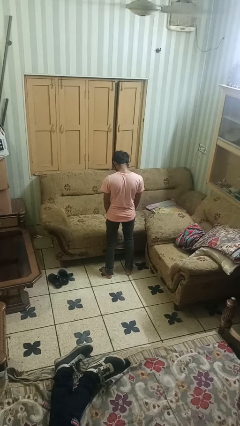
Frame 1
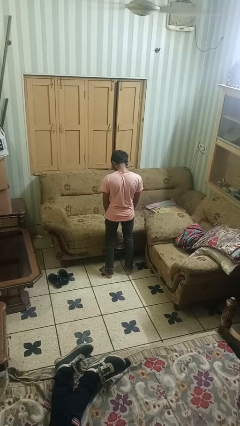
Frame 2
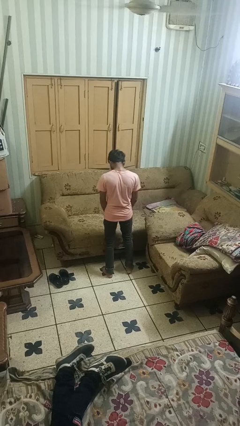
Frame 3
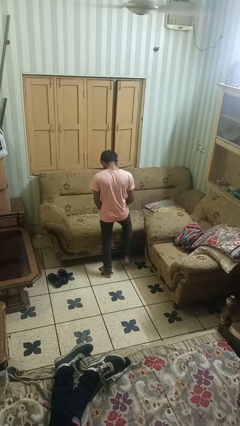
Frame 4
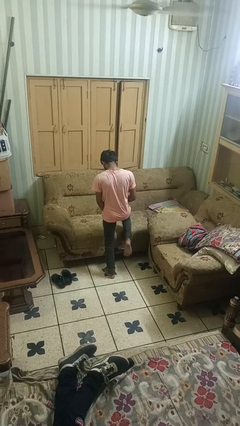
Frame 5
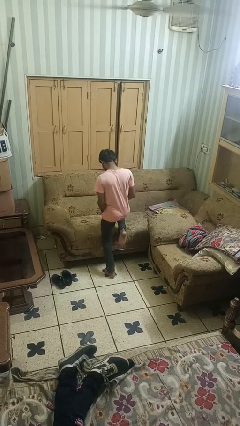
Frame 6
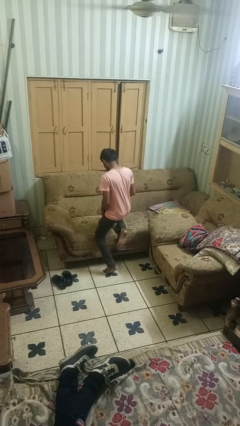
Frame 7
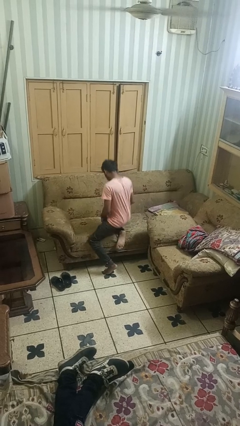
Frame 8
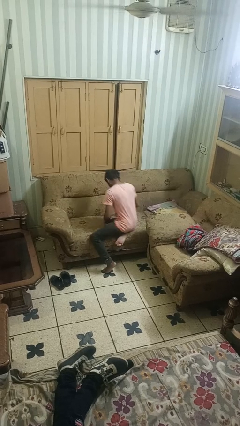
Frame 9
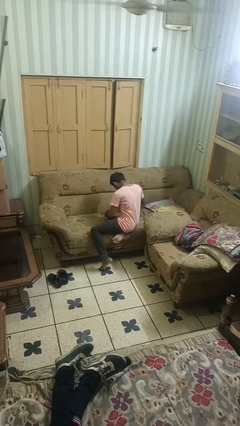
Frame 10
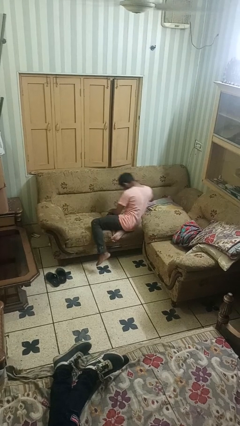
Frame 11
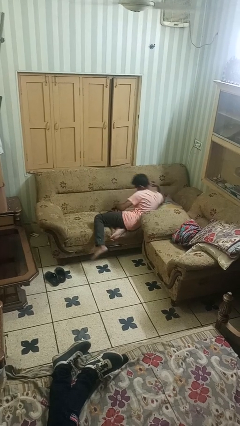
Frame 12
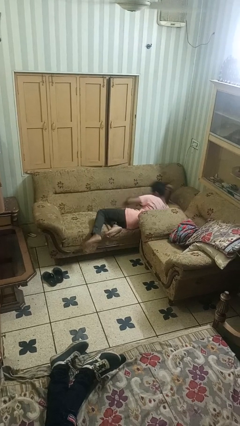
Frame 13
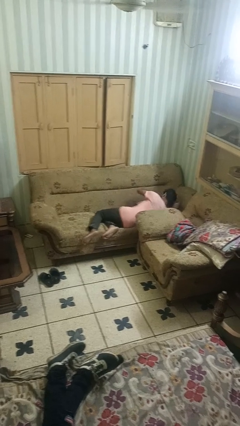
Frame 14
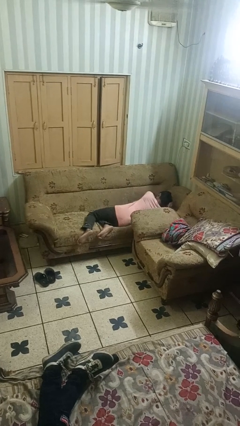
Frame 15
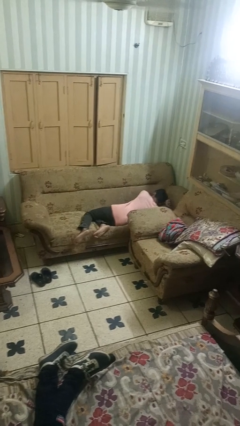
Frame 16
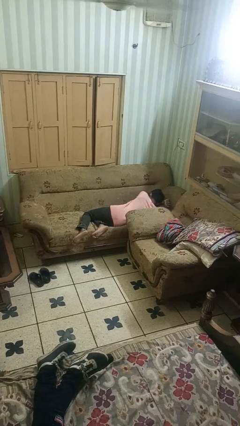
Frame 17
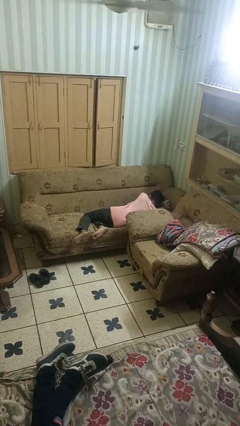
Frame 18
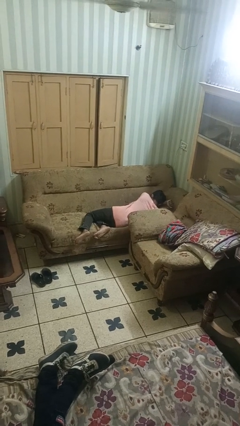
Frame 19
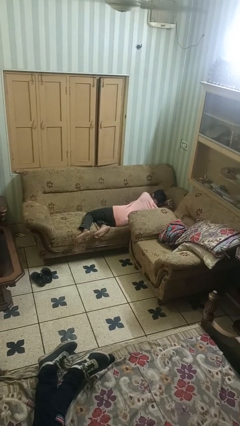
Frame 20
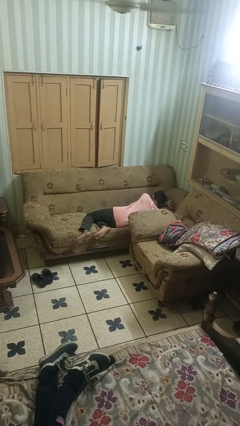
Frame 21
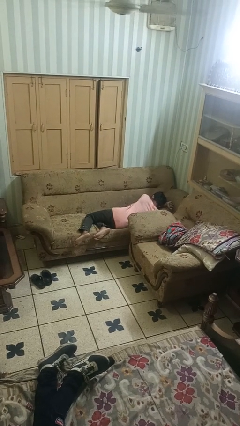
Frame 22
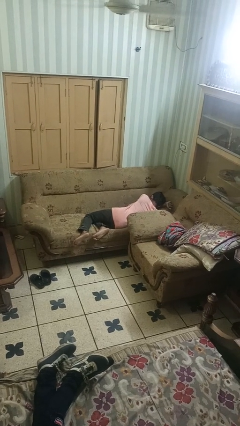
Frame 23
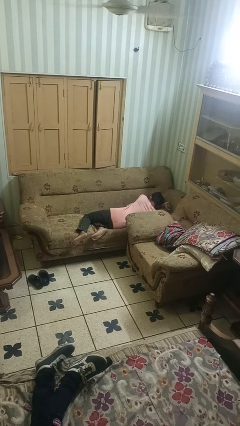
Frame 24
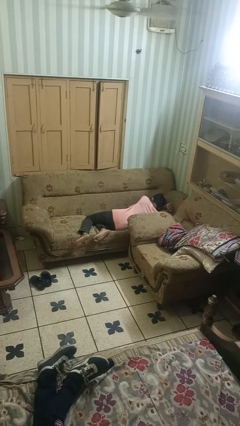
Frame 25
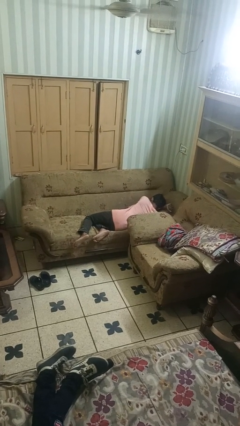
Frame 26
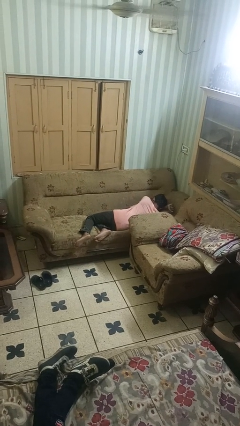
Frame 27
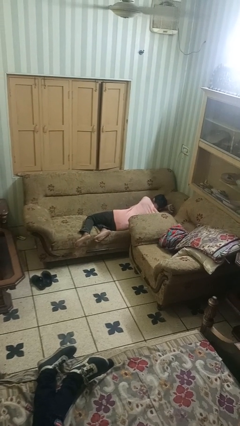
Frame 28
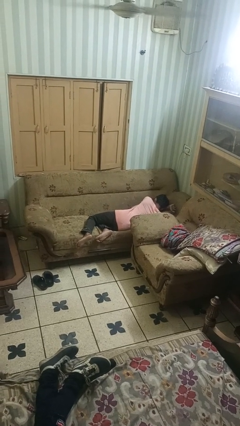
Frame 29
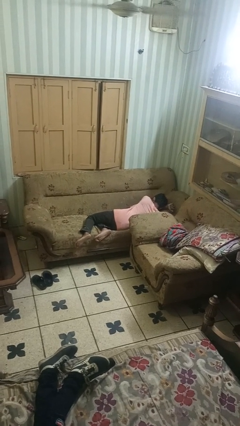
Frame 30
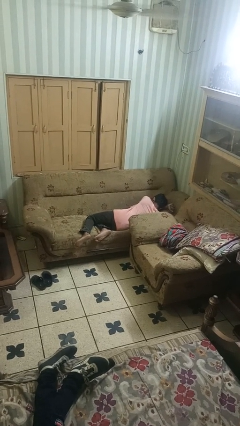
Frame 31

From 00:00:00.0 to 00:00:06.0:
person lies down on couch

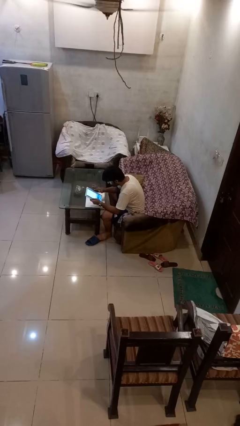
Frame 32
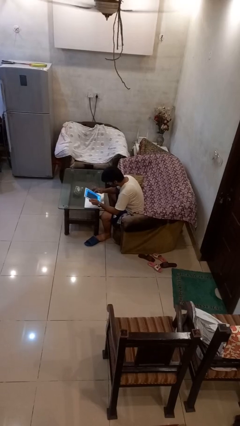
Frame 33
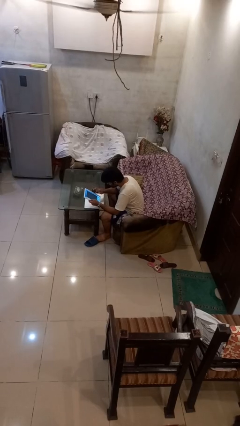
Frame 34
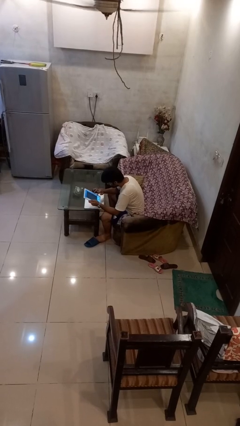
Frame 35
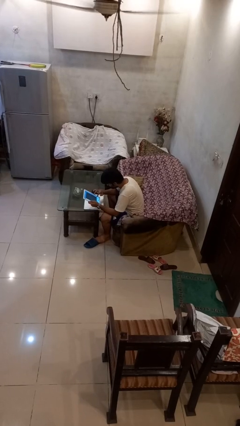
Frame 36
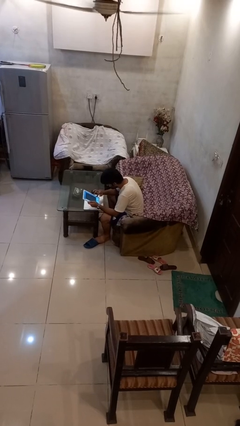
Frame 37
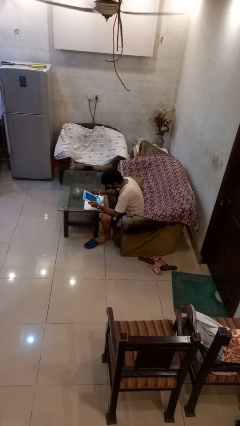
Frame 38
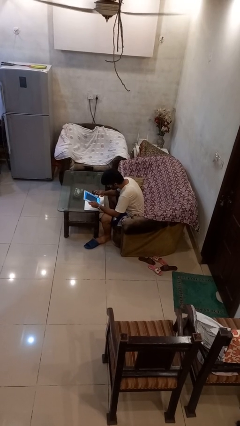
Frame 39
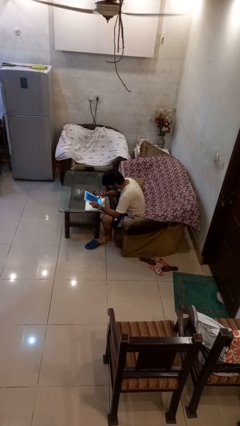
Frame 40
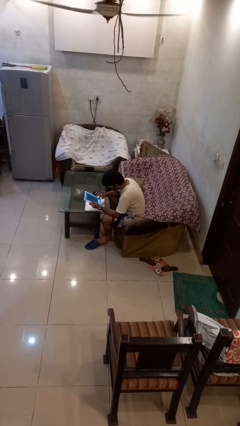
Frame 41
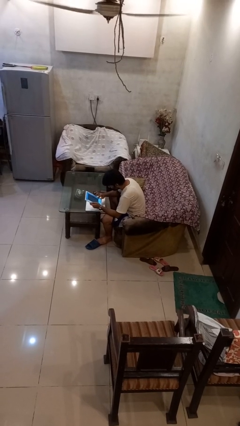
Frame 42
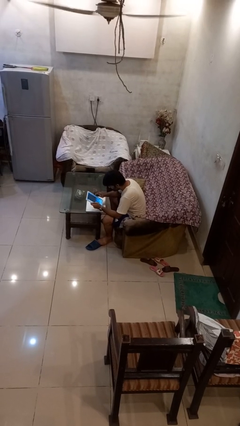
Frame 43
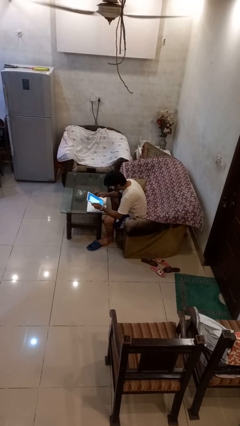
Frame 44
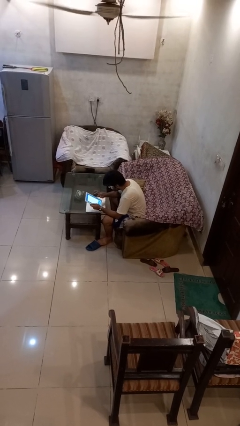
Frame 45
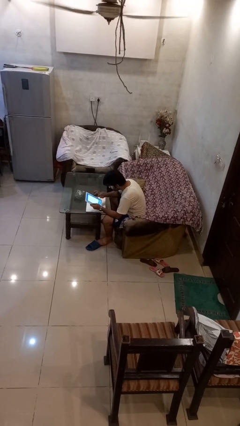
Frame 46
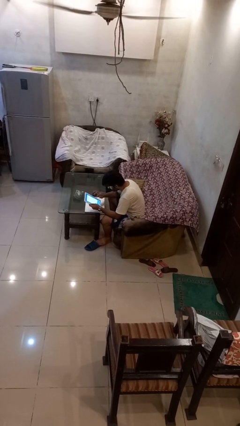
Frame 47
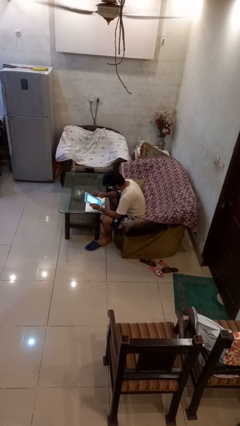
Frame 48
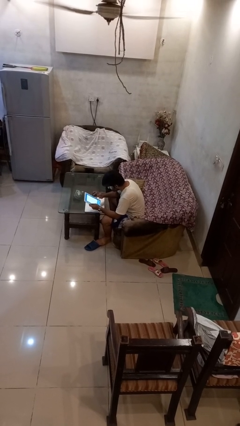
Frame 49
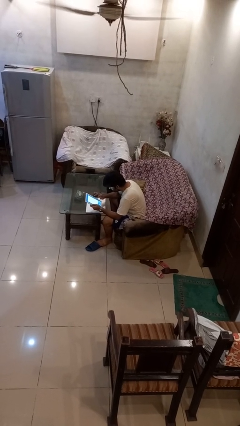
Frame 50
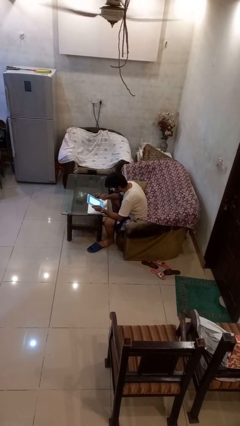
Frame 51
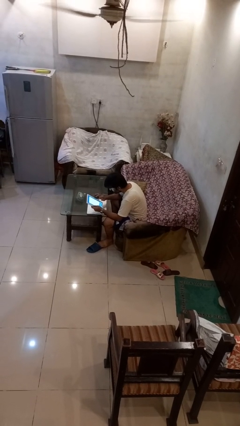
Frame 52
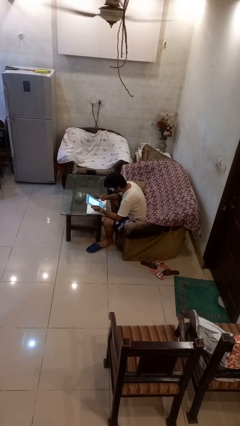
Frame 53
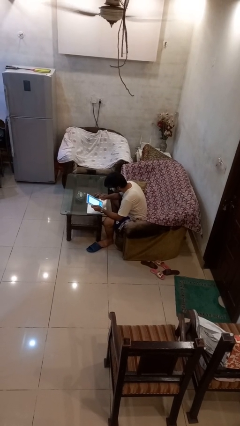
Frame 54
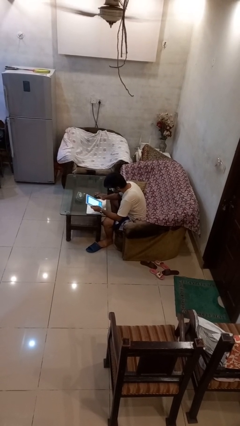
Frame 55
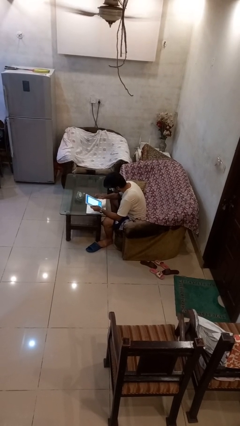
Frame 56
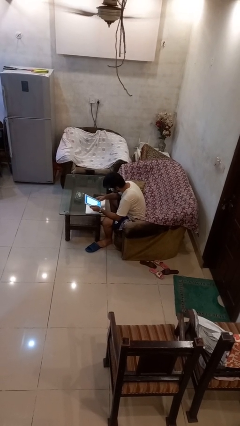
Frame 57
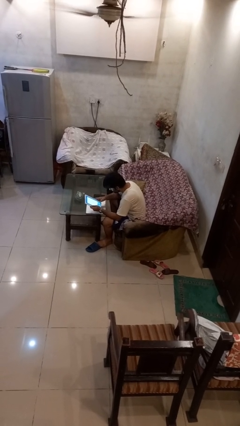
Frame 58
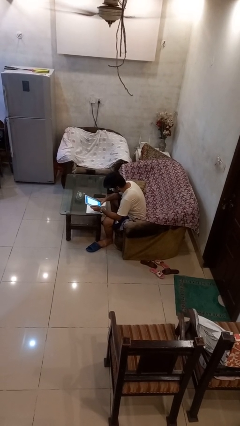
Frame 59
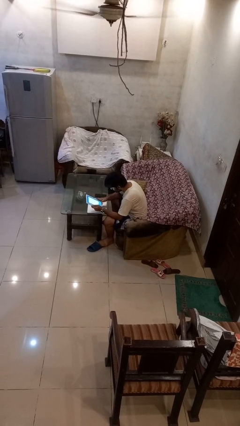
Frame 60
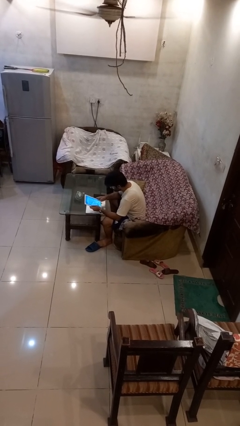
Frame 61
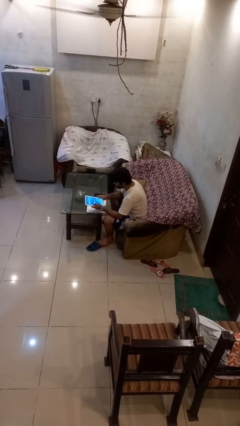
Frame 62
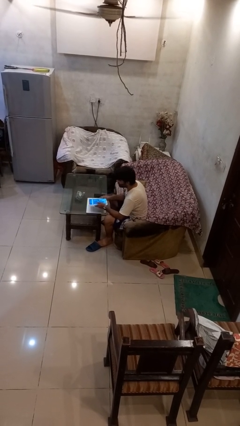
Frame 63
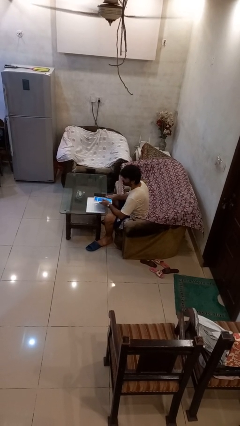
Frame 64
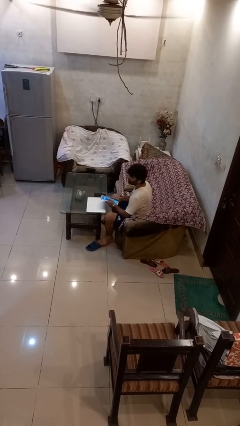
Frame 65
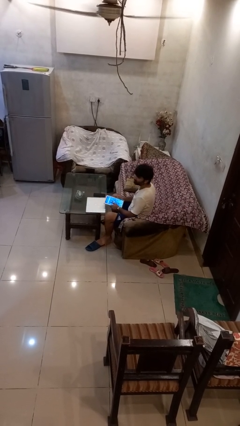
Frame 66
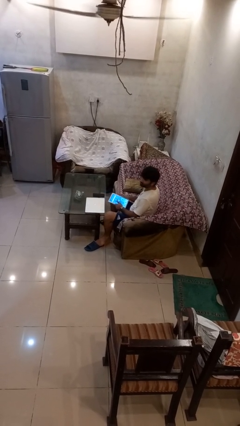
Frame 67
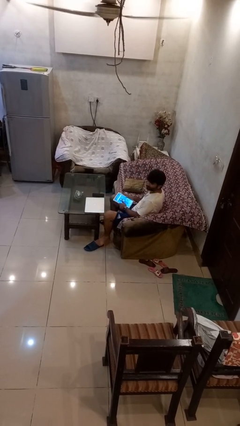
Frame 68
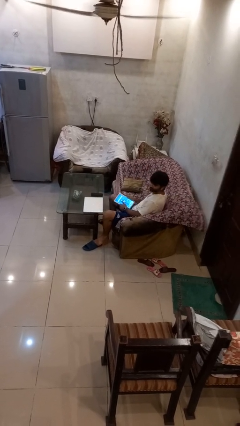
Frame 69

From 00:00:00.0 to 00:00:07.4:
person interacts with tablet

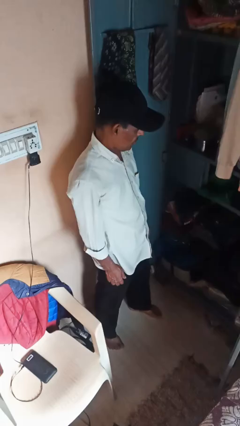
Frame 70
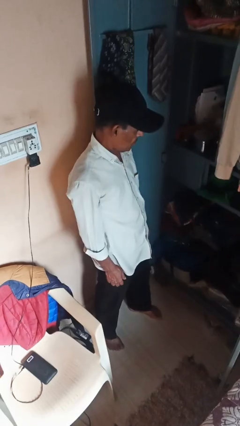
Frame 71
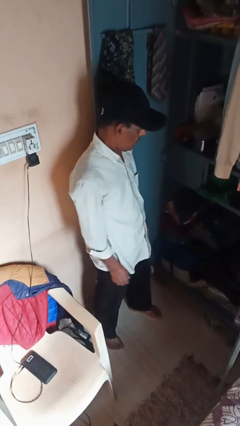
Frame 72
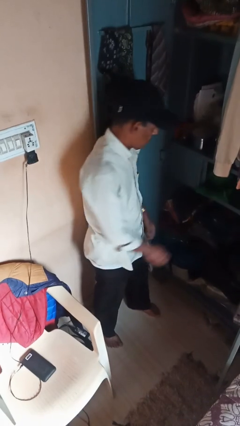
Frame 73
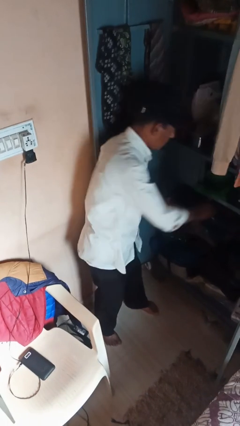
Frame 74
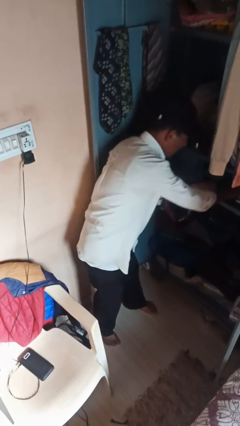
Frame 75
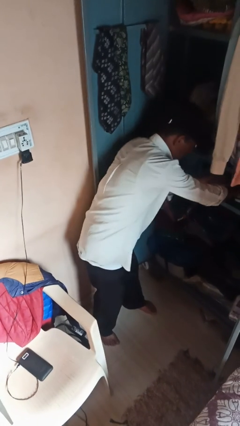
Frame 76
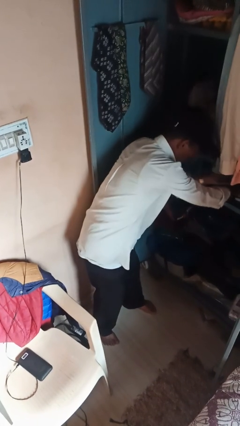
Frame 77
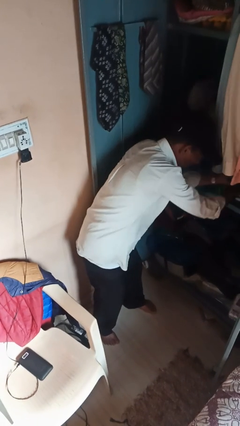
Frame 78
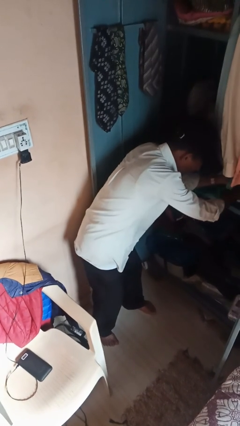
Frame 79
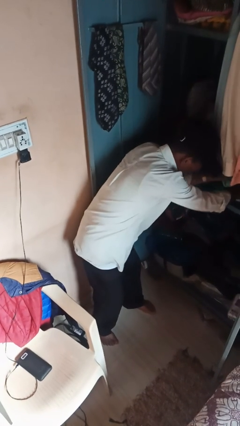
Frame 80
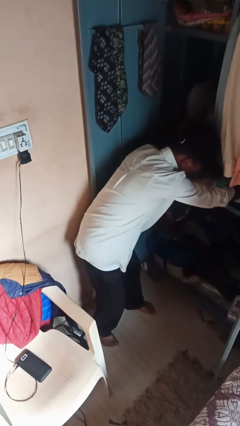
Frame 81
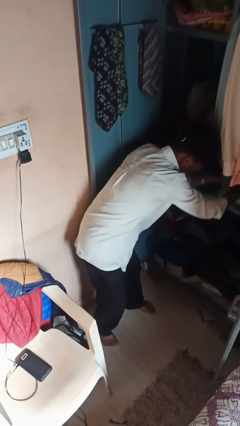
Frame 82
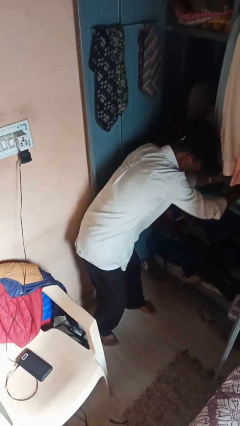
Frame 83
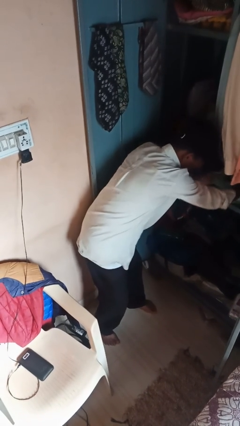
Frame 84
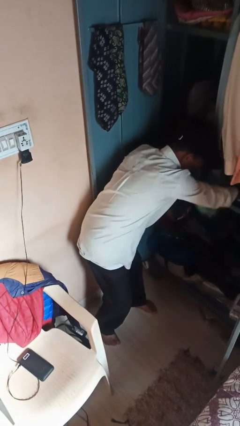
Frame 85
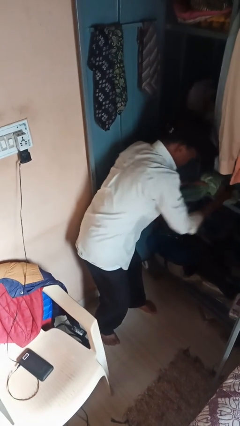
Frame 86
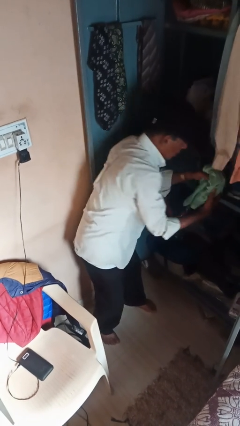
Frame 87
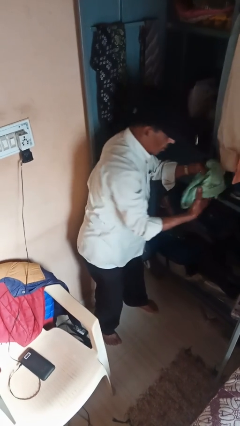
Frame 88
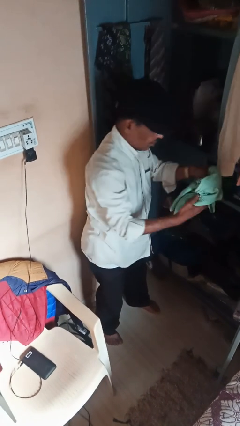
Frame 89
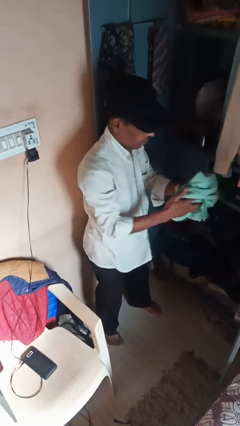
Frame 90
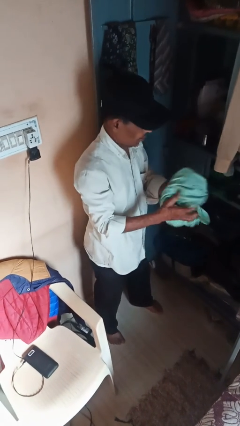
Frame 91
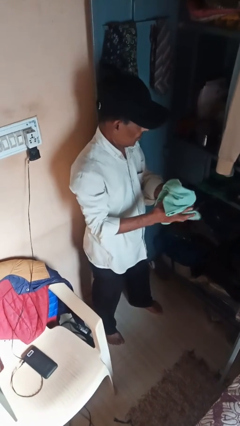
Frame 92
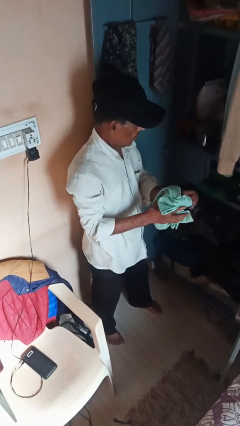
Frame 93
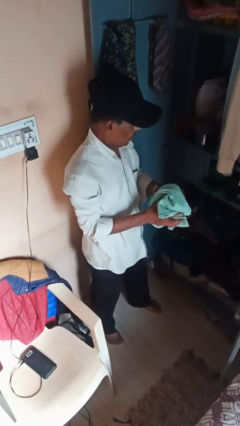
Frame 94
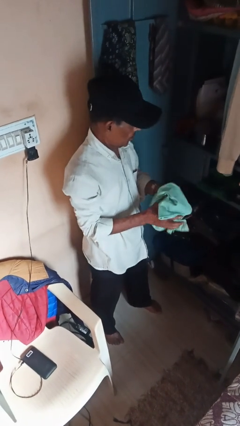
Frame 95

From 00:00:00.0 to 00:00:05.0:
person takes clothes from dresser
